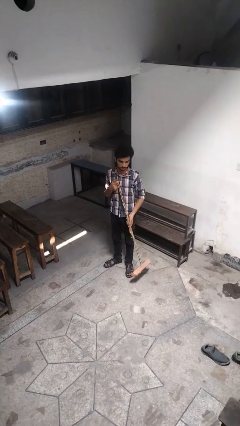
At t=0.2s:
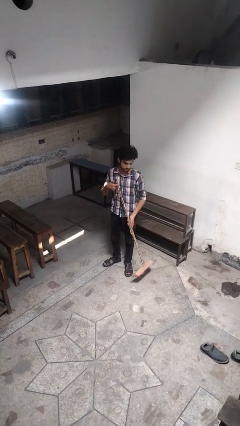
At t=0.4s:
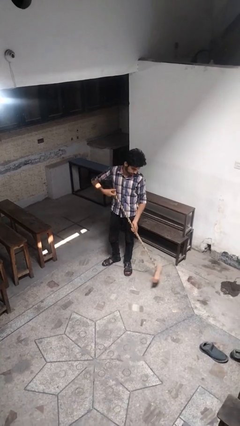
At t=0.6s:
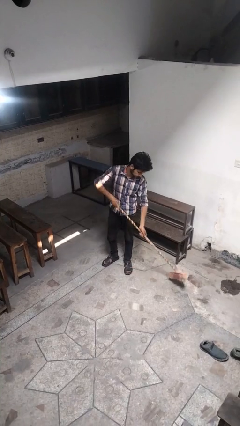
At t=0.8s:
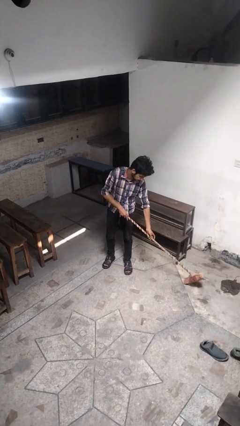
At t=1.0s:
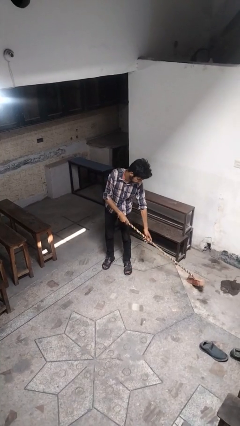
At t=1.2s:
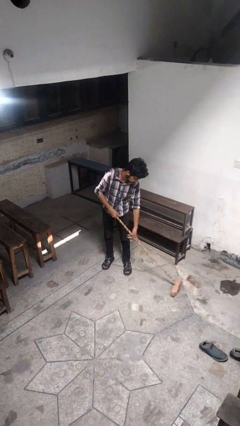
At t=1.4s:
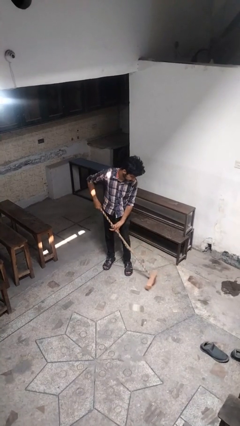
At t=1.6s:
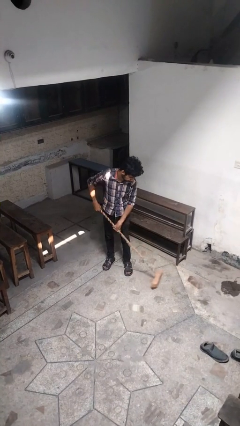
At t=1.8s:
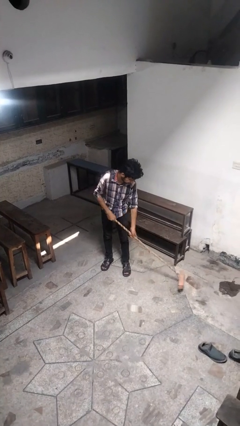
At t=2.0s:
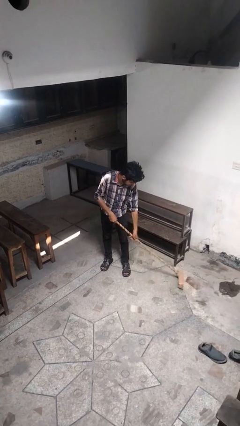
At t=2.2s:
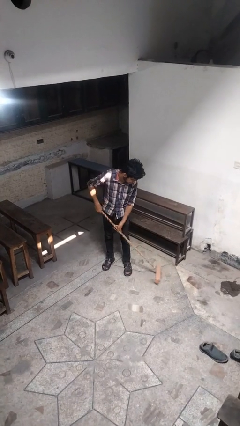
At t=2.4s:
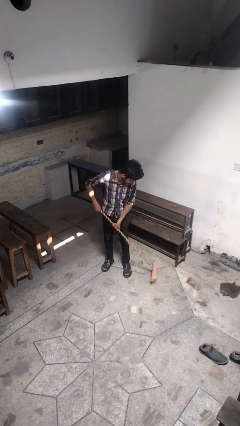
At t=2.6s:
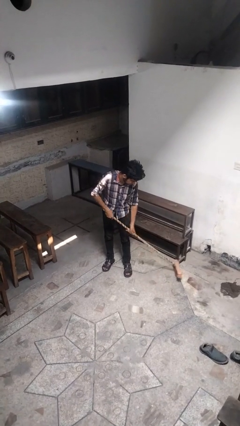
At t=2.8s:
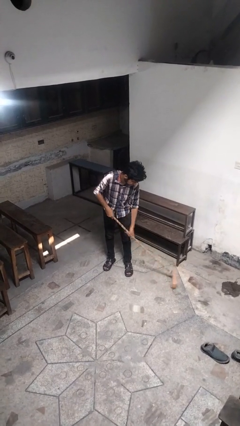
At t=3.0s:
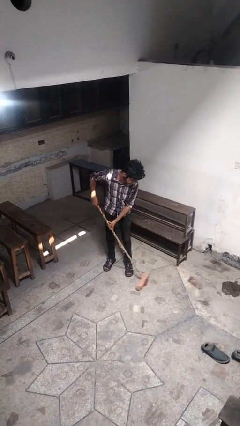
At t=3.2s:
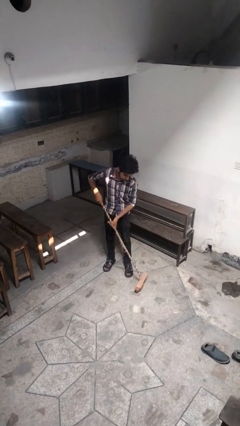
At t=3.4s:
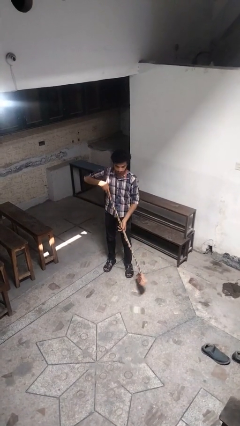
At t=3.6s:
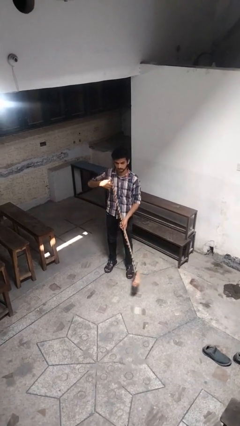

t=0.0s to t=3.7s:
person sweeps floor

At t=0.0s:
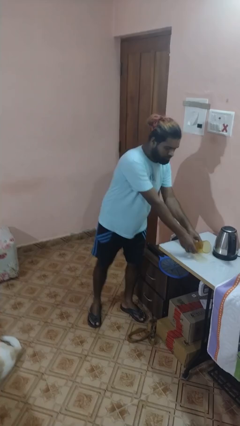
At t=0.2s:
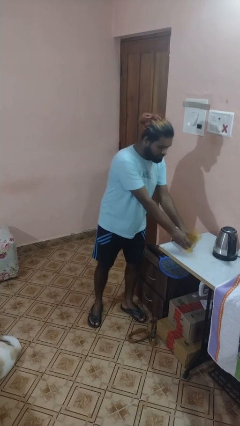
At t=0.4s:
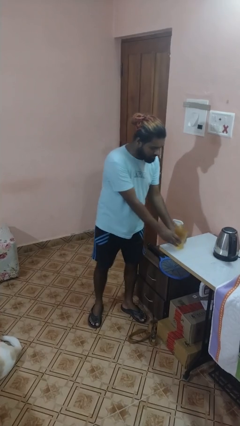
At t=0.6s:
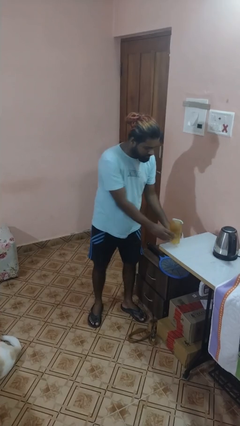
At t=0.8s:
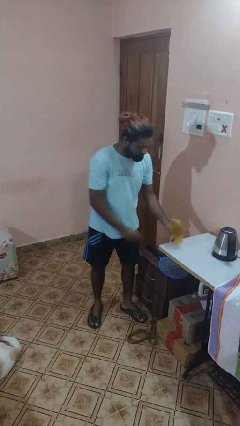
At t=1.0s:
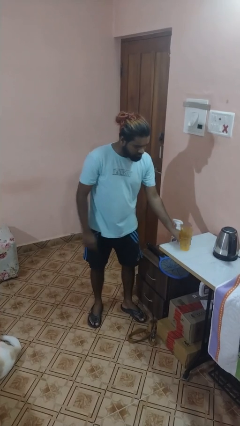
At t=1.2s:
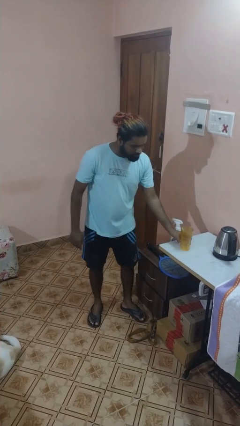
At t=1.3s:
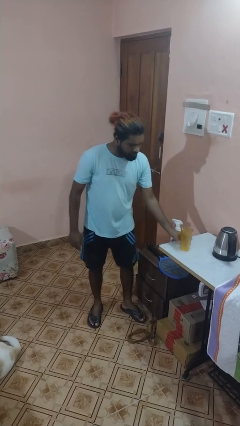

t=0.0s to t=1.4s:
person sets upright glass

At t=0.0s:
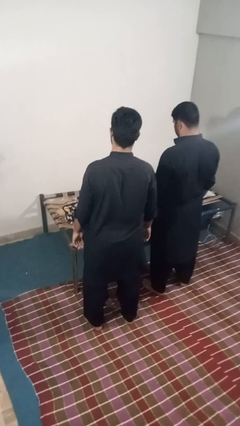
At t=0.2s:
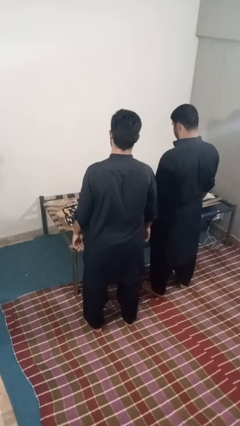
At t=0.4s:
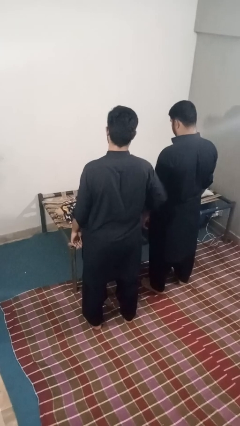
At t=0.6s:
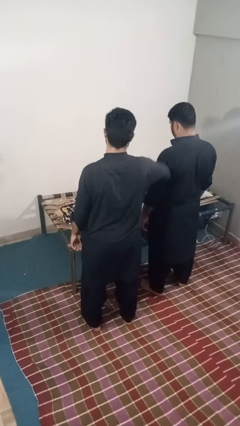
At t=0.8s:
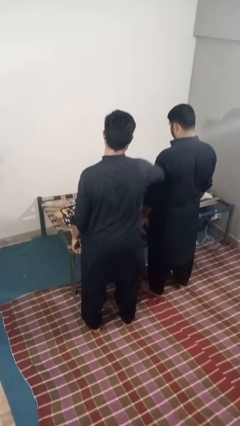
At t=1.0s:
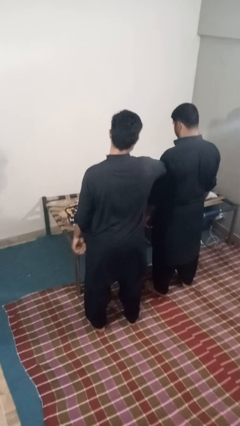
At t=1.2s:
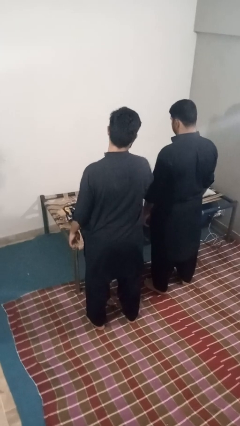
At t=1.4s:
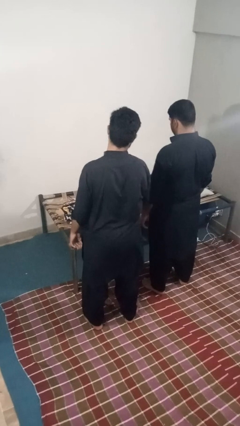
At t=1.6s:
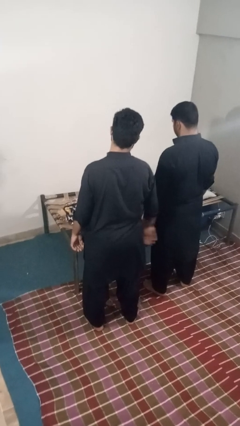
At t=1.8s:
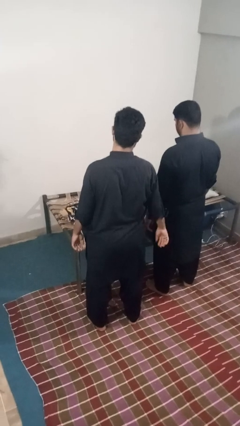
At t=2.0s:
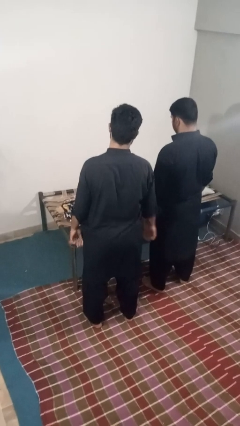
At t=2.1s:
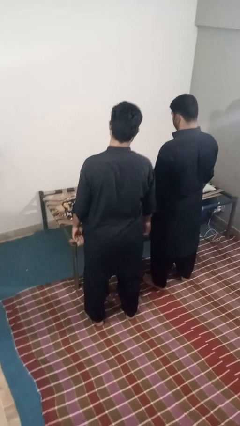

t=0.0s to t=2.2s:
person nudges person with elbow

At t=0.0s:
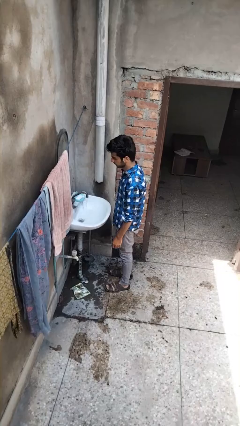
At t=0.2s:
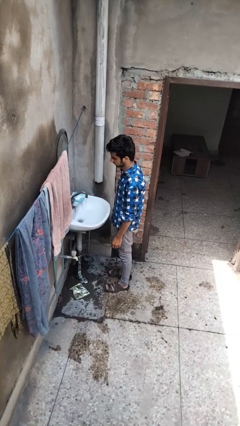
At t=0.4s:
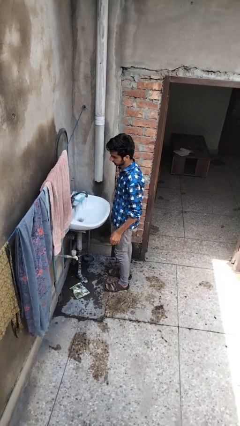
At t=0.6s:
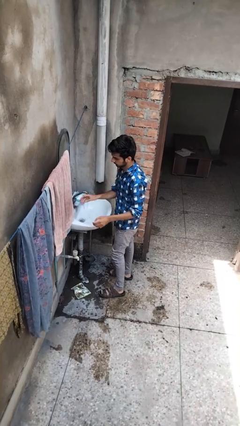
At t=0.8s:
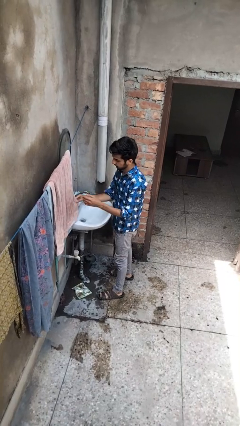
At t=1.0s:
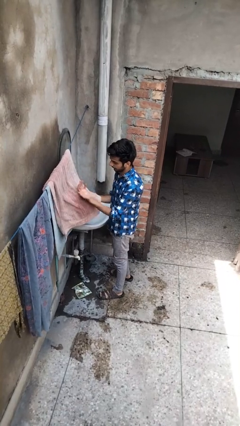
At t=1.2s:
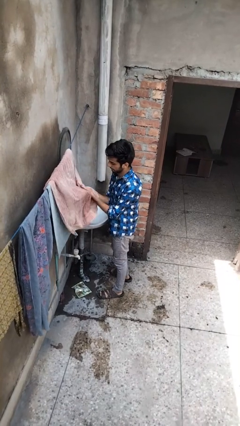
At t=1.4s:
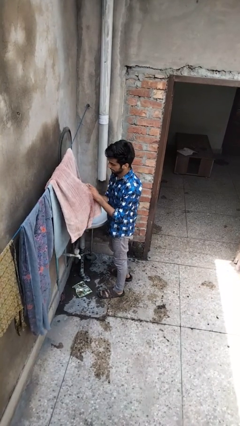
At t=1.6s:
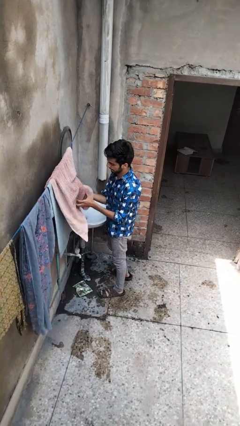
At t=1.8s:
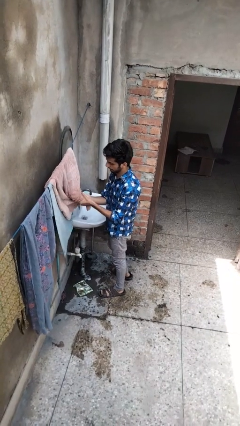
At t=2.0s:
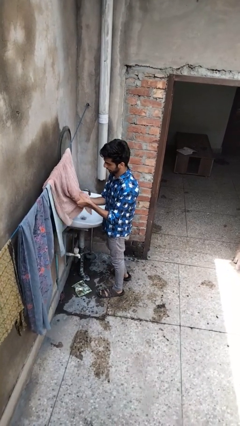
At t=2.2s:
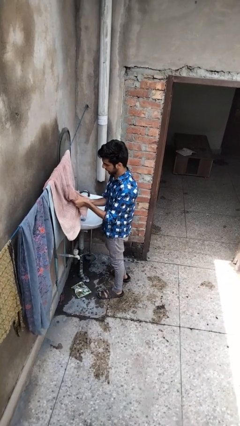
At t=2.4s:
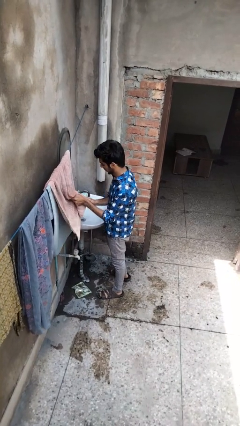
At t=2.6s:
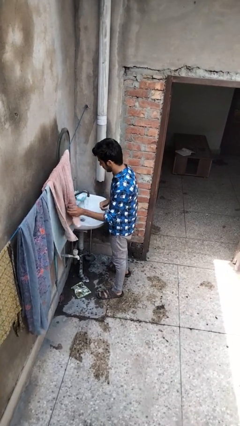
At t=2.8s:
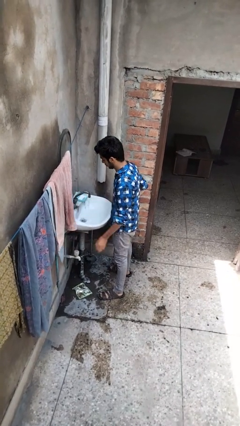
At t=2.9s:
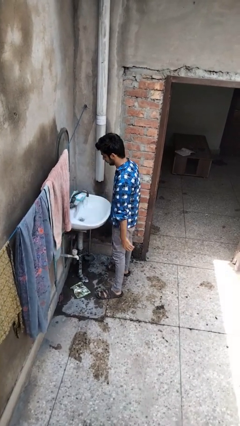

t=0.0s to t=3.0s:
person dries hands with towel

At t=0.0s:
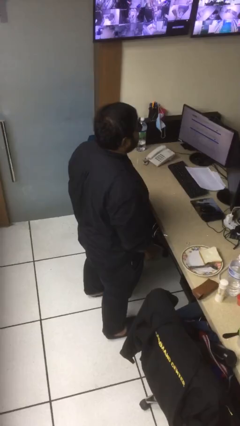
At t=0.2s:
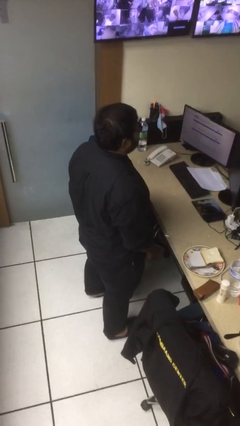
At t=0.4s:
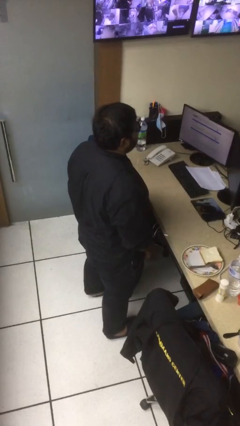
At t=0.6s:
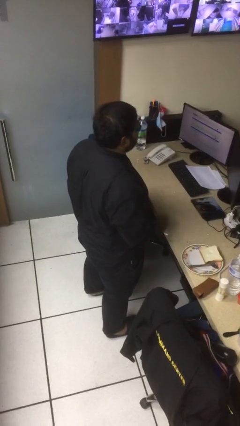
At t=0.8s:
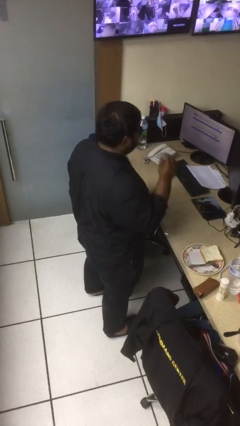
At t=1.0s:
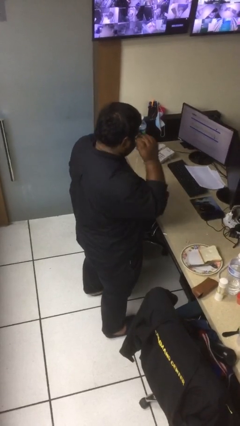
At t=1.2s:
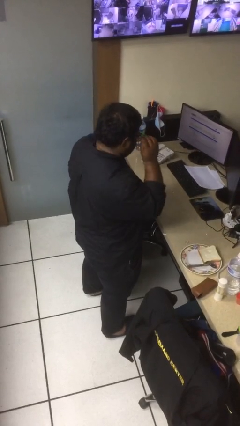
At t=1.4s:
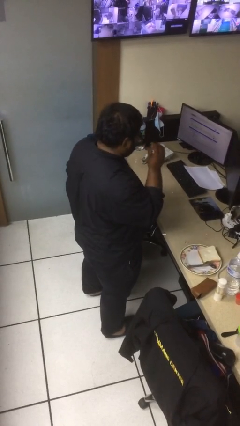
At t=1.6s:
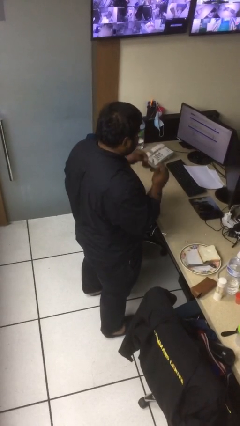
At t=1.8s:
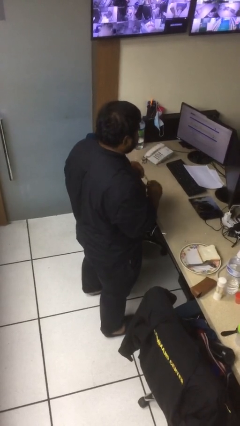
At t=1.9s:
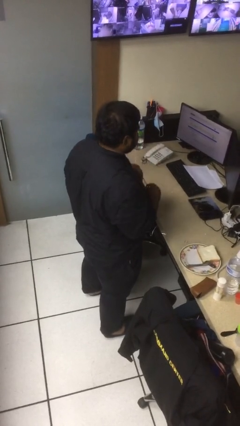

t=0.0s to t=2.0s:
person takes off sunglasses

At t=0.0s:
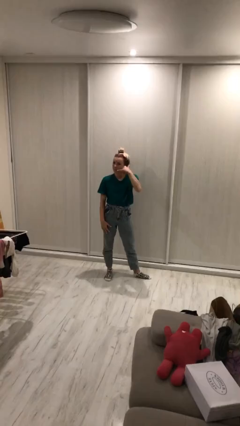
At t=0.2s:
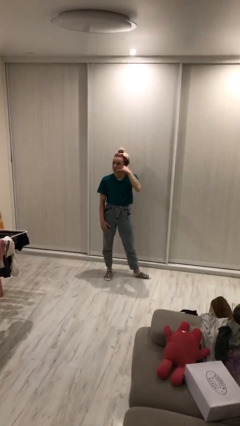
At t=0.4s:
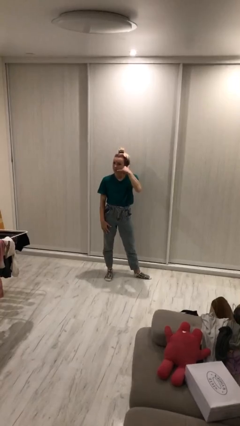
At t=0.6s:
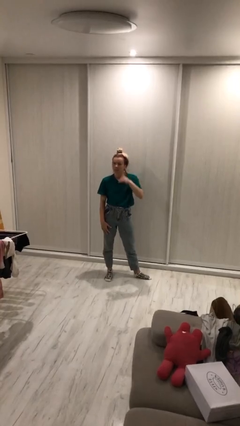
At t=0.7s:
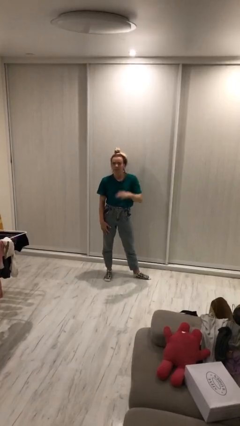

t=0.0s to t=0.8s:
person gestures call me

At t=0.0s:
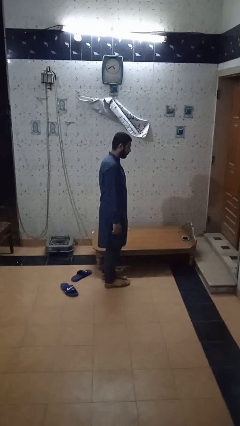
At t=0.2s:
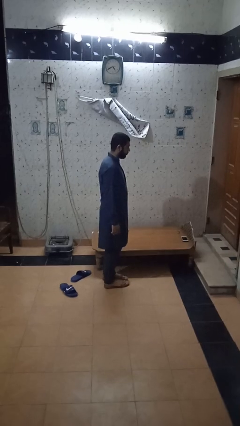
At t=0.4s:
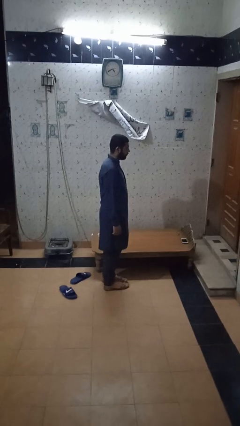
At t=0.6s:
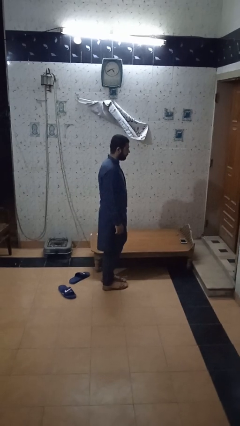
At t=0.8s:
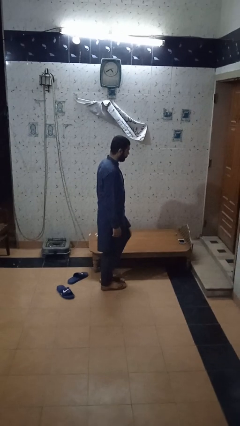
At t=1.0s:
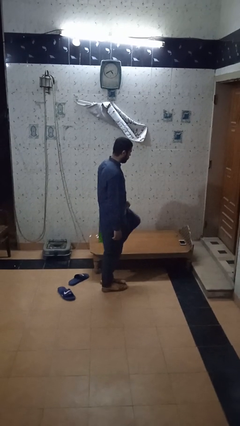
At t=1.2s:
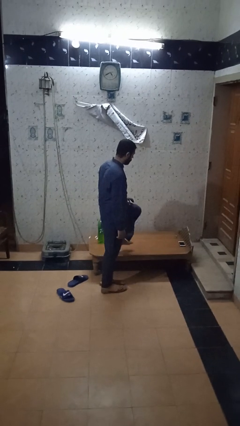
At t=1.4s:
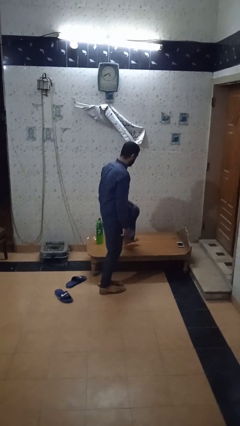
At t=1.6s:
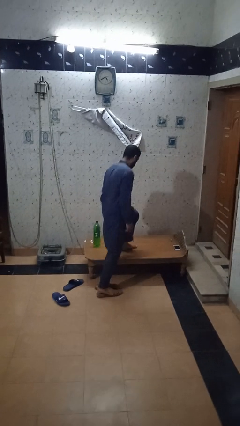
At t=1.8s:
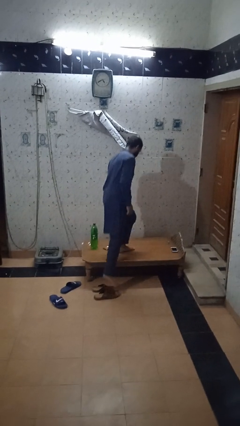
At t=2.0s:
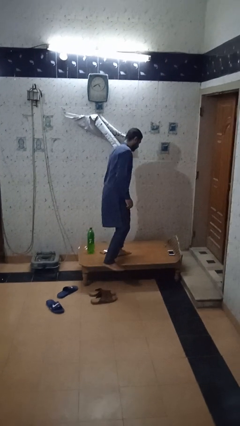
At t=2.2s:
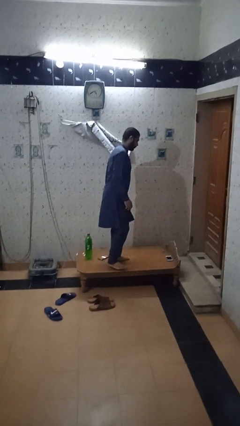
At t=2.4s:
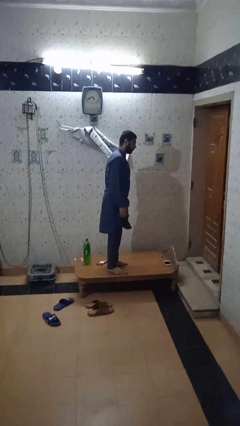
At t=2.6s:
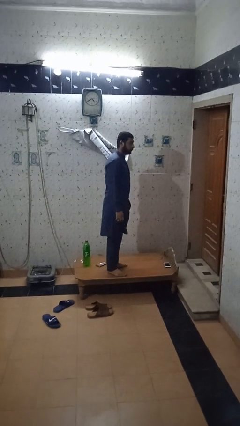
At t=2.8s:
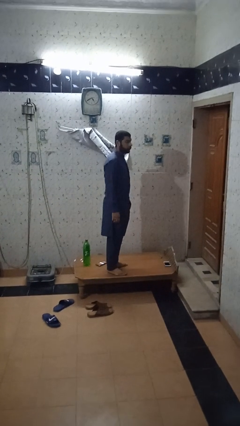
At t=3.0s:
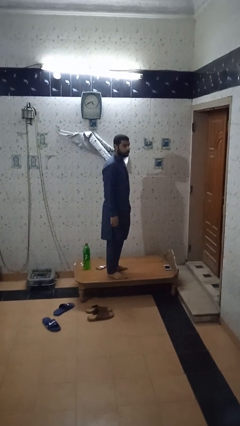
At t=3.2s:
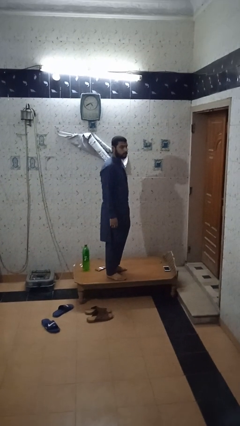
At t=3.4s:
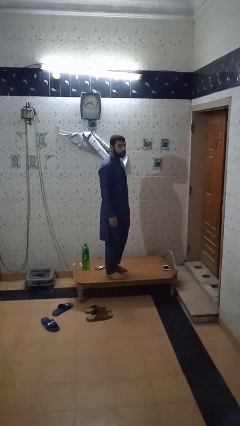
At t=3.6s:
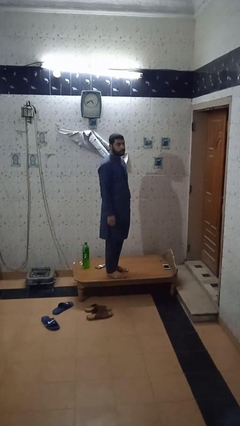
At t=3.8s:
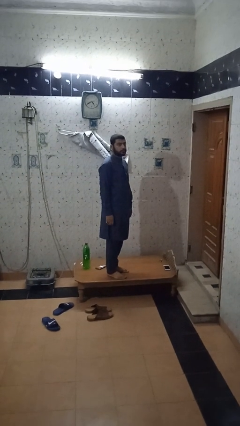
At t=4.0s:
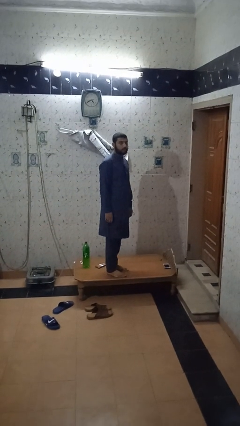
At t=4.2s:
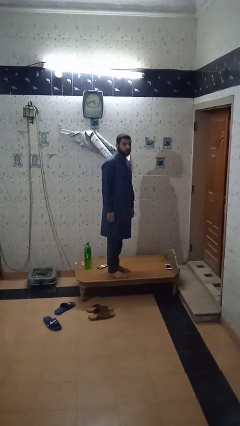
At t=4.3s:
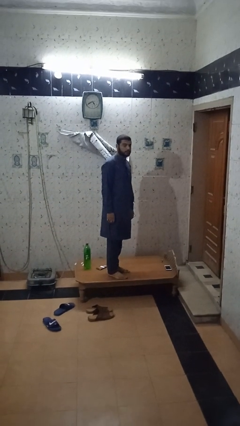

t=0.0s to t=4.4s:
person climbs on table
